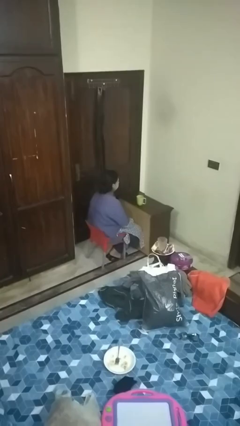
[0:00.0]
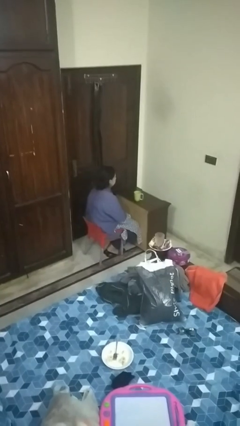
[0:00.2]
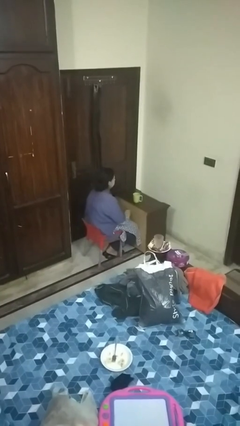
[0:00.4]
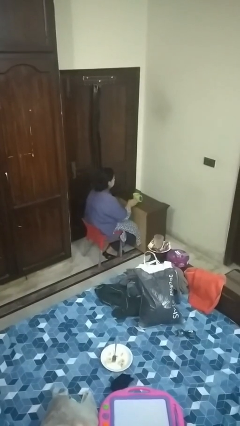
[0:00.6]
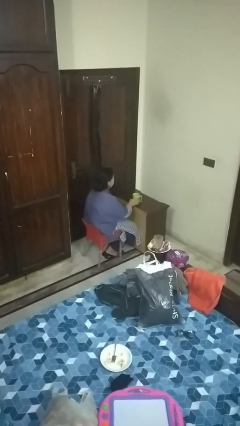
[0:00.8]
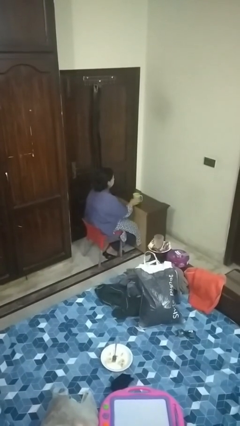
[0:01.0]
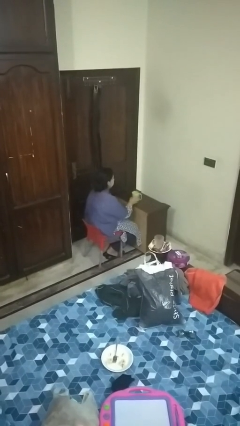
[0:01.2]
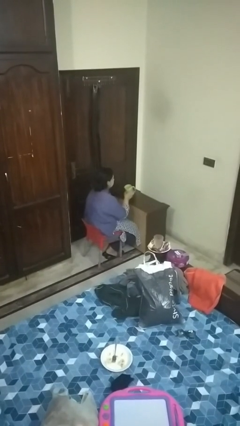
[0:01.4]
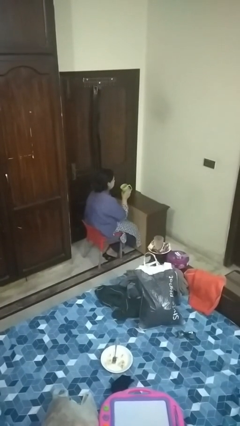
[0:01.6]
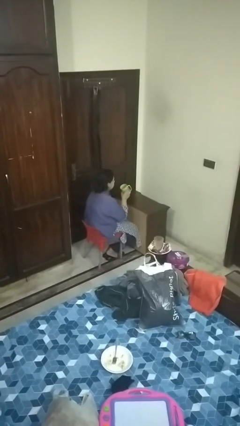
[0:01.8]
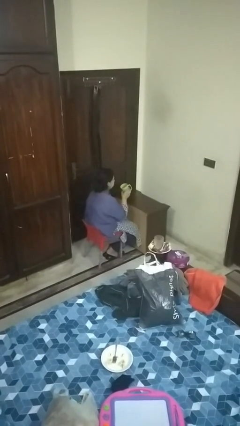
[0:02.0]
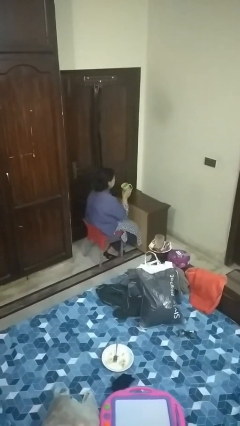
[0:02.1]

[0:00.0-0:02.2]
person picks up object from table

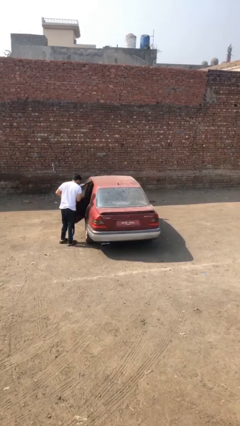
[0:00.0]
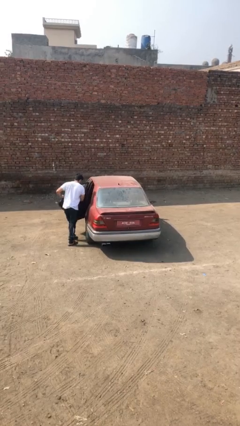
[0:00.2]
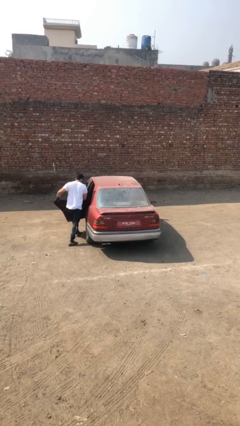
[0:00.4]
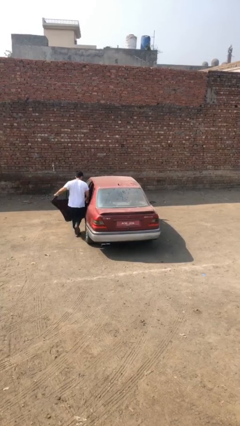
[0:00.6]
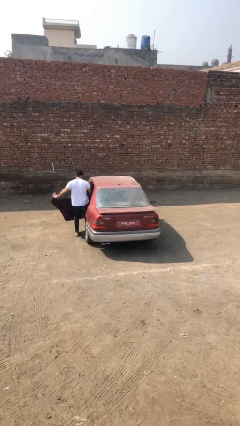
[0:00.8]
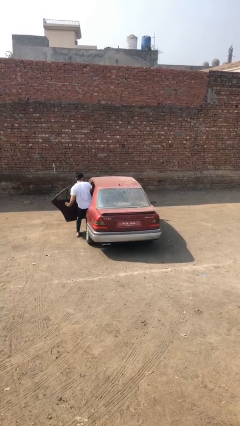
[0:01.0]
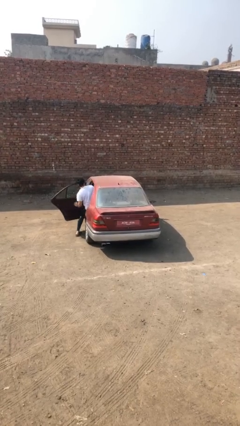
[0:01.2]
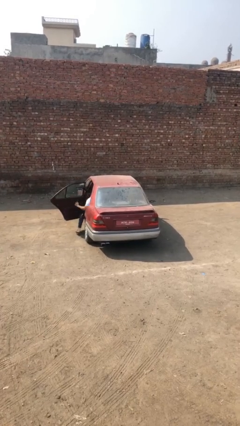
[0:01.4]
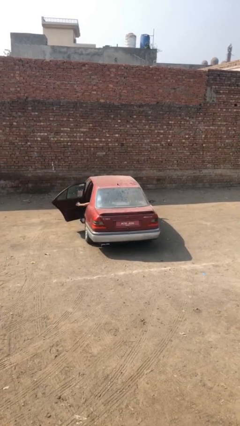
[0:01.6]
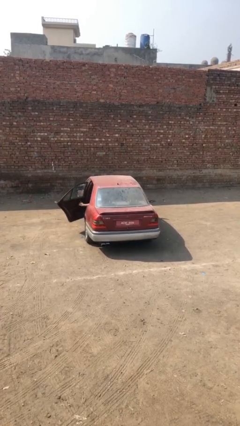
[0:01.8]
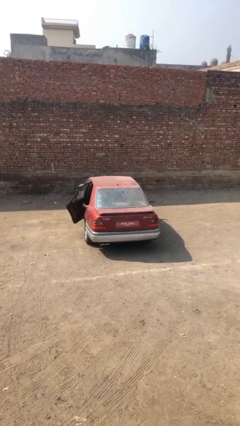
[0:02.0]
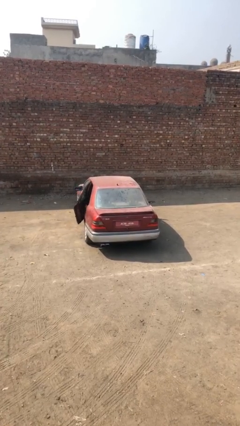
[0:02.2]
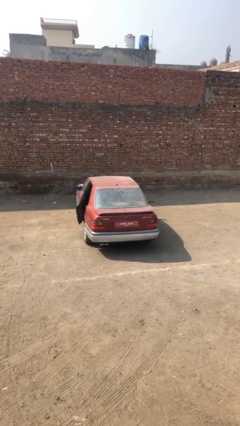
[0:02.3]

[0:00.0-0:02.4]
car picks up person

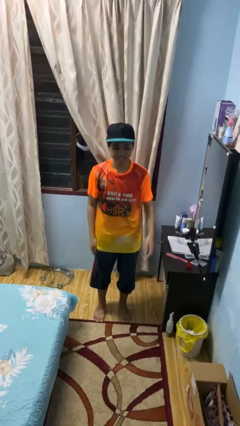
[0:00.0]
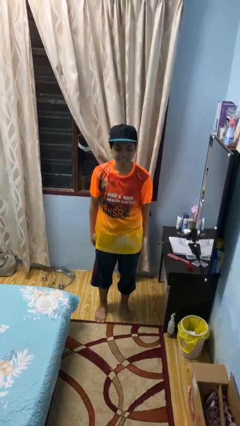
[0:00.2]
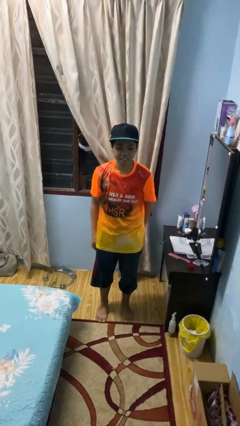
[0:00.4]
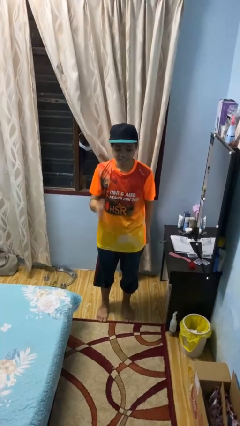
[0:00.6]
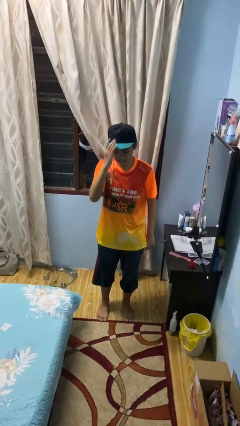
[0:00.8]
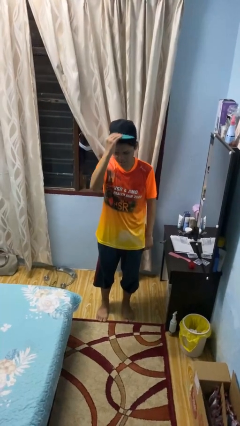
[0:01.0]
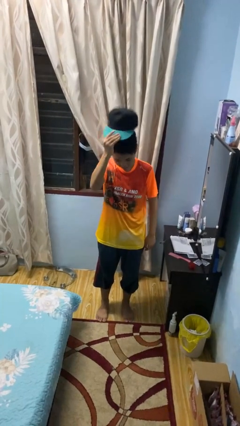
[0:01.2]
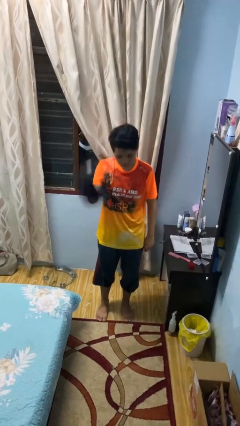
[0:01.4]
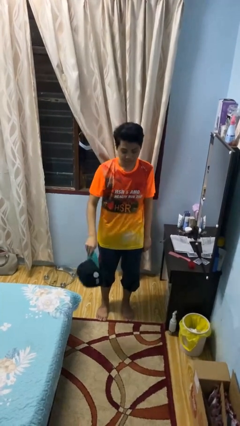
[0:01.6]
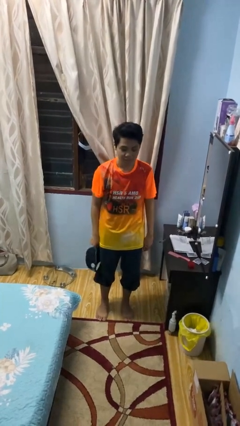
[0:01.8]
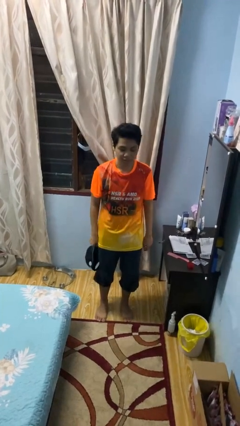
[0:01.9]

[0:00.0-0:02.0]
person takes off hat

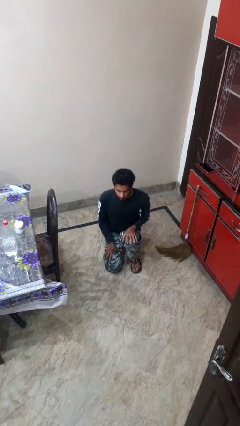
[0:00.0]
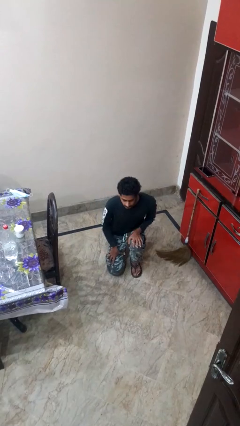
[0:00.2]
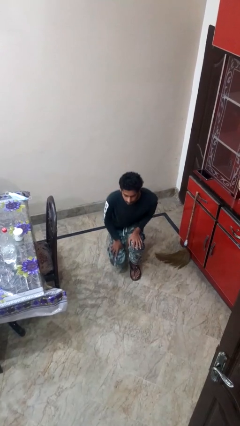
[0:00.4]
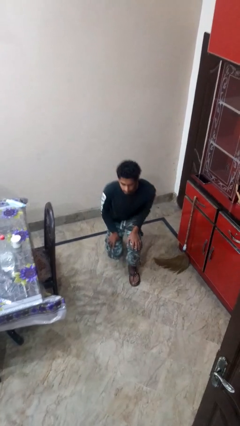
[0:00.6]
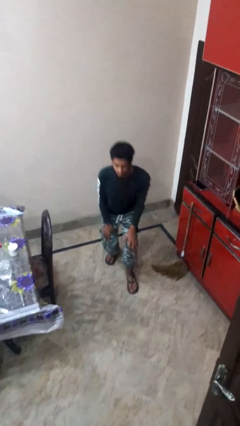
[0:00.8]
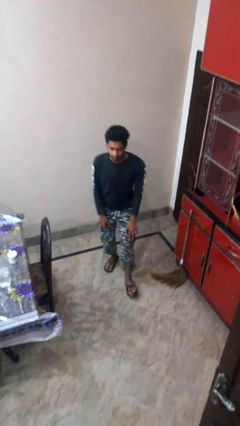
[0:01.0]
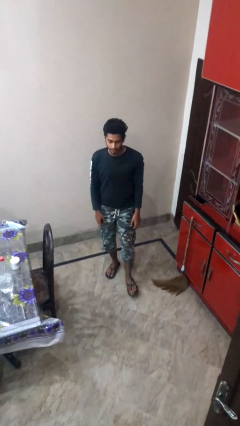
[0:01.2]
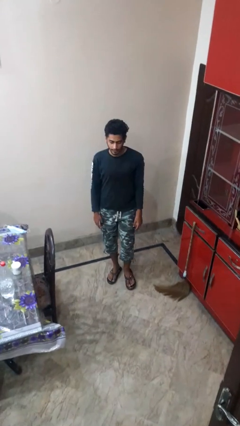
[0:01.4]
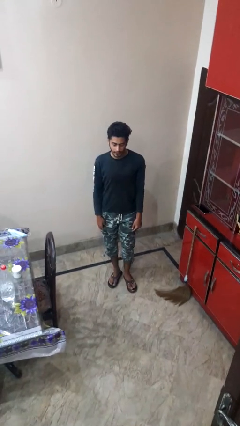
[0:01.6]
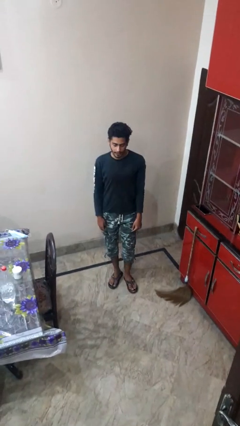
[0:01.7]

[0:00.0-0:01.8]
person stands up from floor

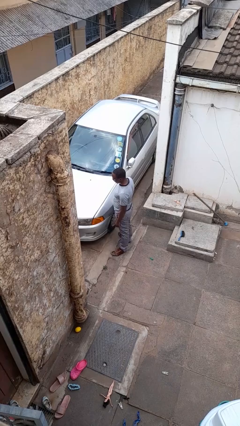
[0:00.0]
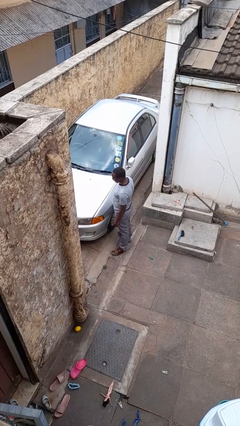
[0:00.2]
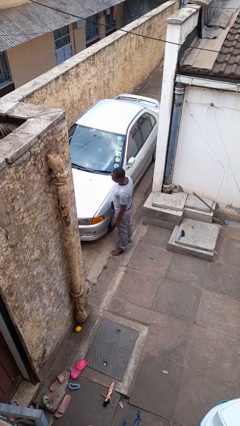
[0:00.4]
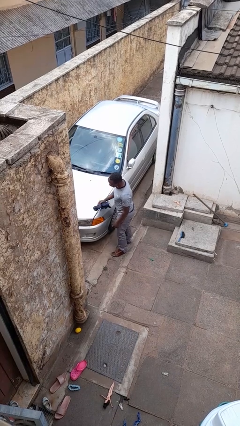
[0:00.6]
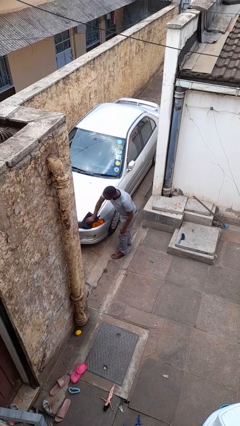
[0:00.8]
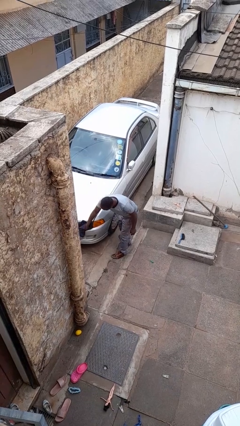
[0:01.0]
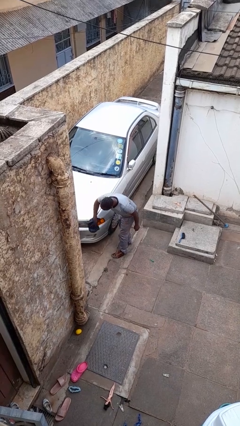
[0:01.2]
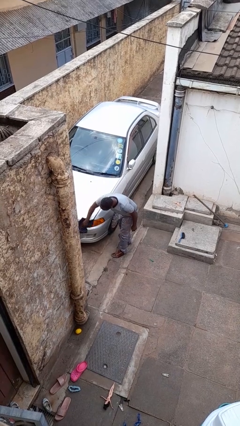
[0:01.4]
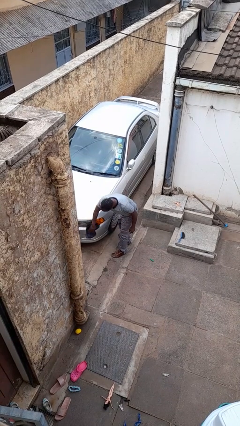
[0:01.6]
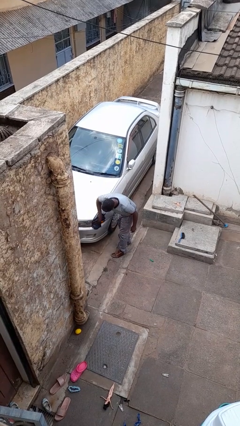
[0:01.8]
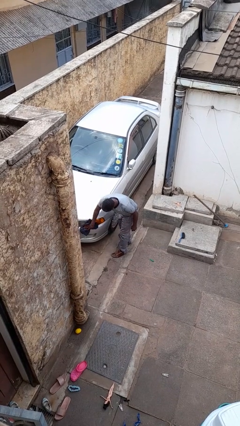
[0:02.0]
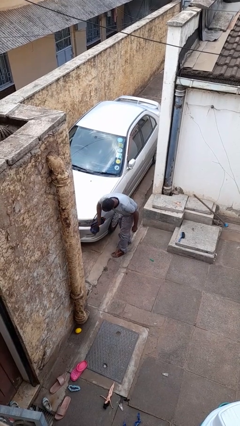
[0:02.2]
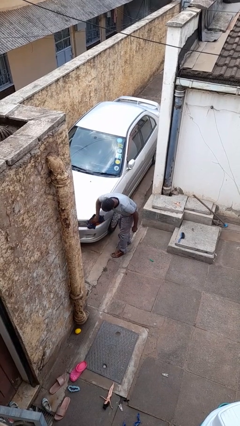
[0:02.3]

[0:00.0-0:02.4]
person polishes car with rag

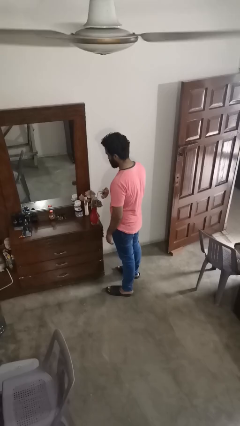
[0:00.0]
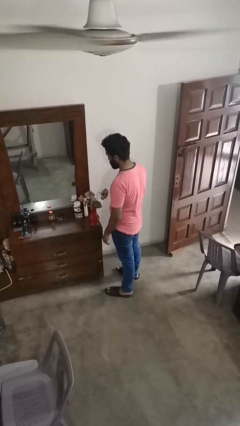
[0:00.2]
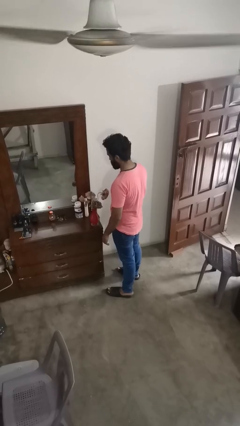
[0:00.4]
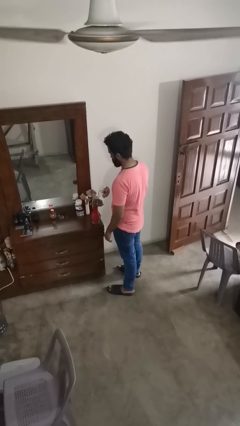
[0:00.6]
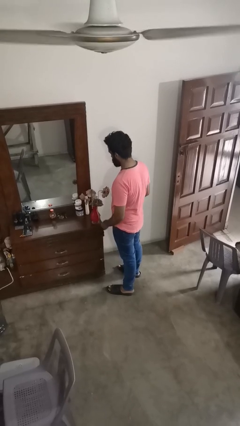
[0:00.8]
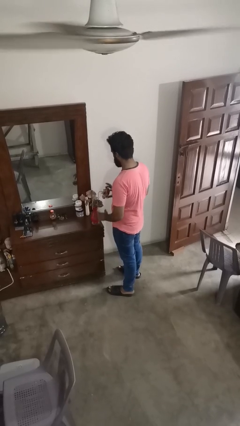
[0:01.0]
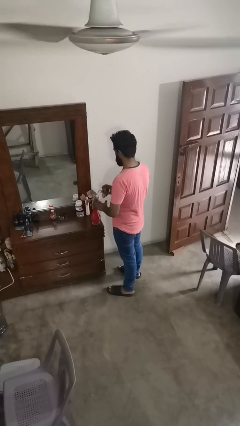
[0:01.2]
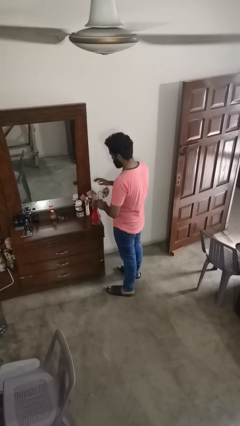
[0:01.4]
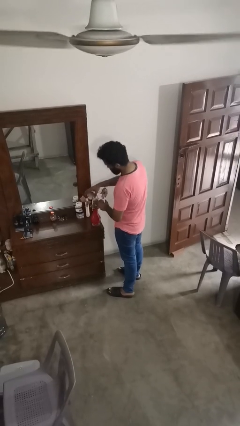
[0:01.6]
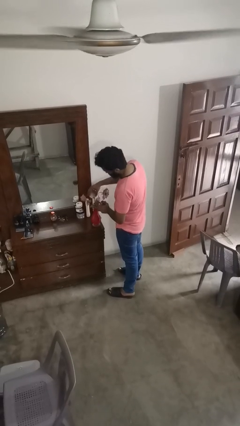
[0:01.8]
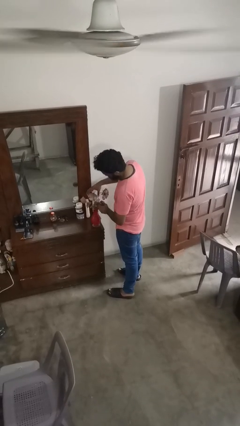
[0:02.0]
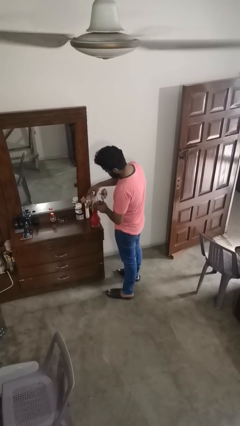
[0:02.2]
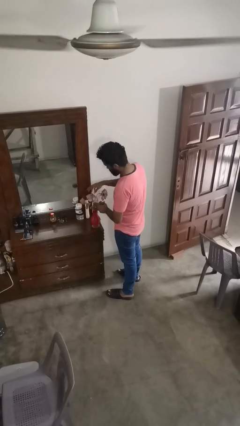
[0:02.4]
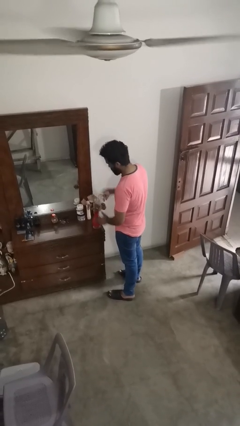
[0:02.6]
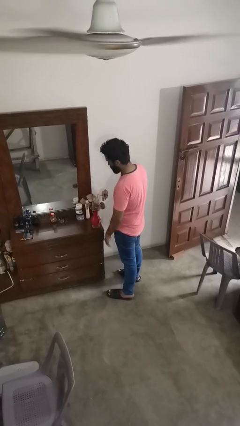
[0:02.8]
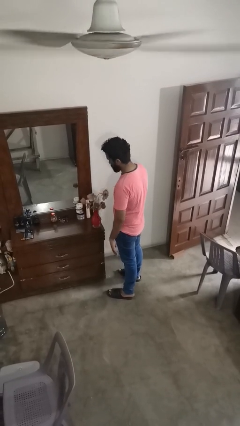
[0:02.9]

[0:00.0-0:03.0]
person arranges flowers in vase

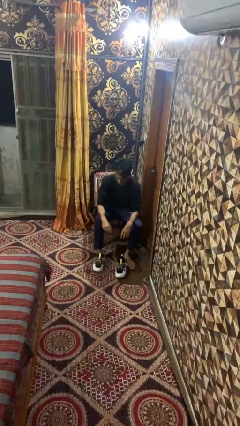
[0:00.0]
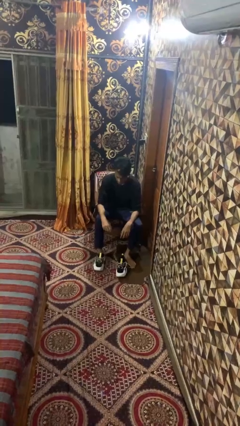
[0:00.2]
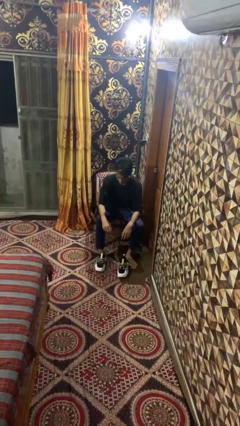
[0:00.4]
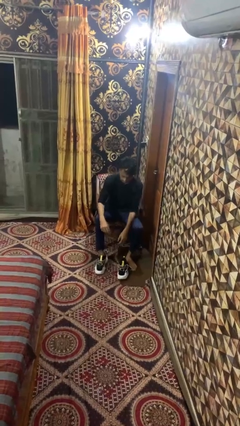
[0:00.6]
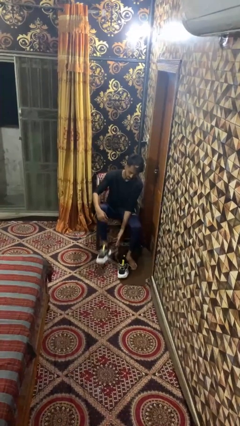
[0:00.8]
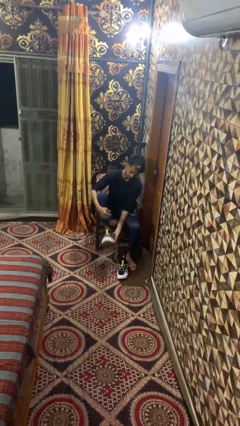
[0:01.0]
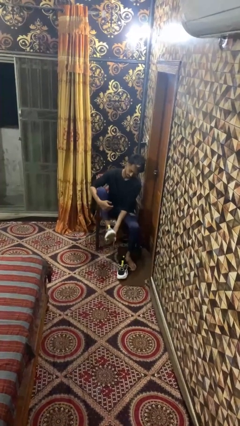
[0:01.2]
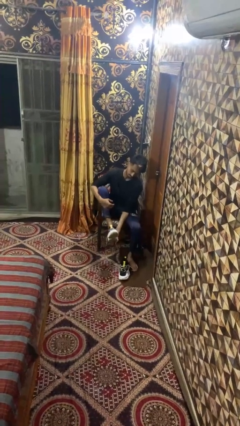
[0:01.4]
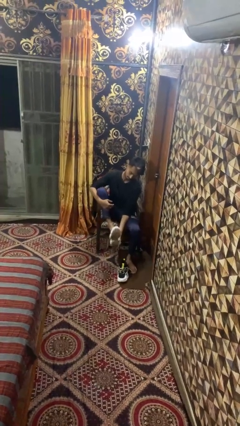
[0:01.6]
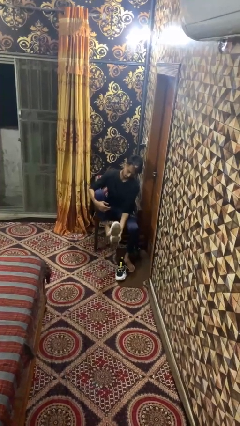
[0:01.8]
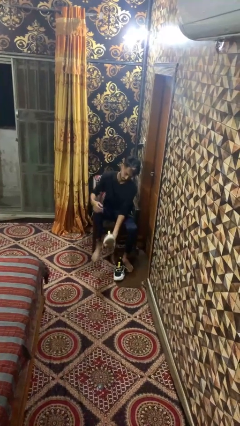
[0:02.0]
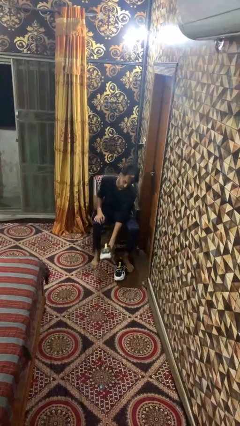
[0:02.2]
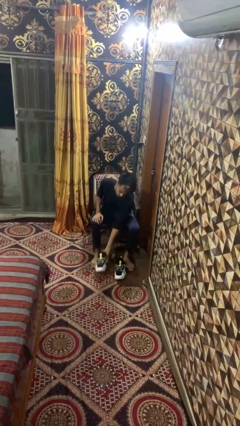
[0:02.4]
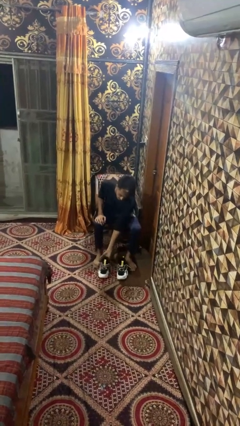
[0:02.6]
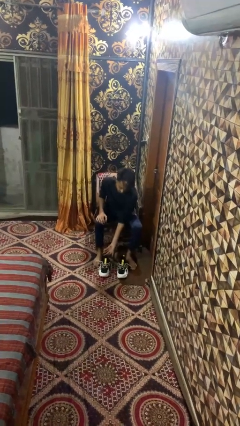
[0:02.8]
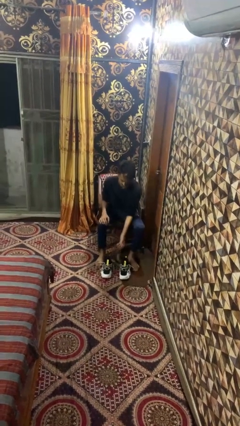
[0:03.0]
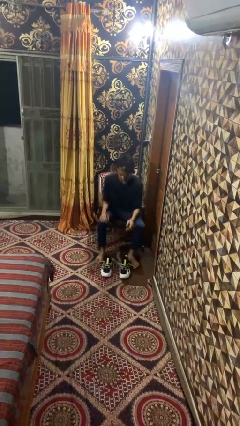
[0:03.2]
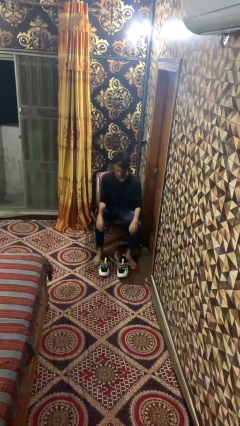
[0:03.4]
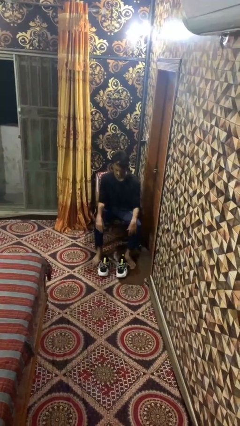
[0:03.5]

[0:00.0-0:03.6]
person takes off shoes
